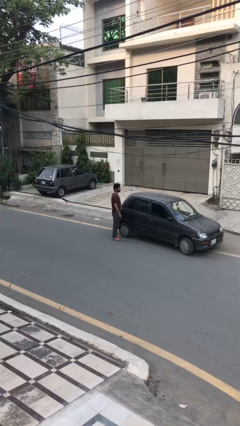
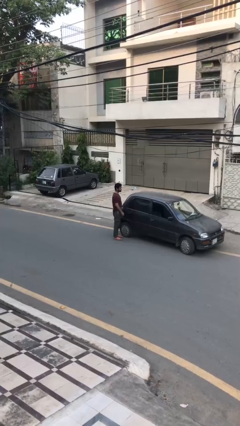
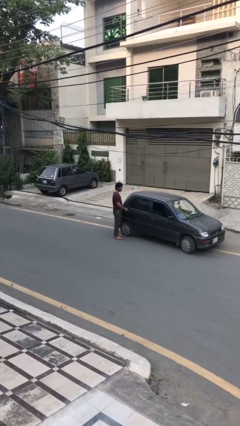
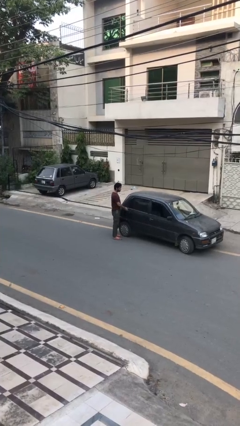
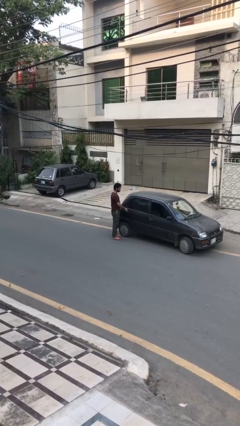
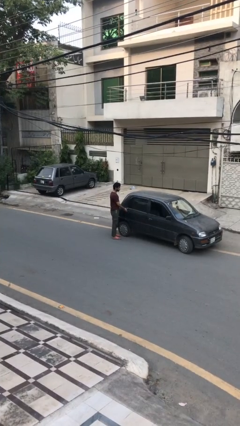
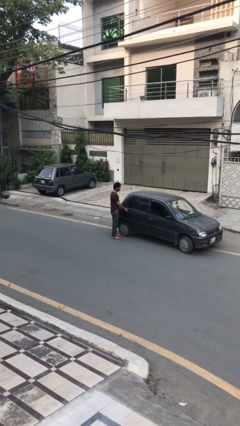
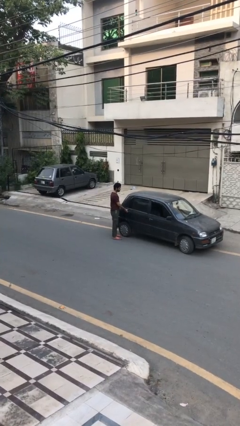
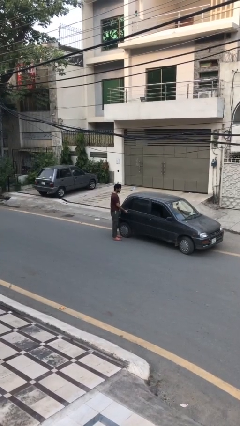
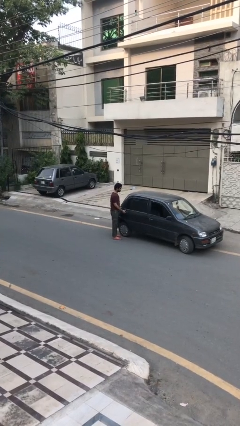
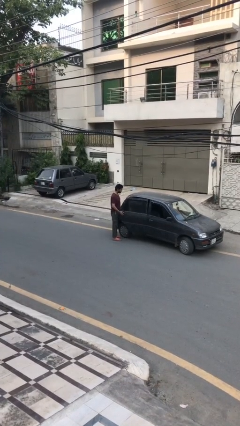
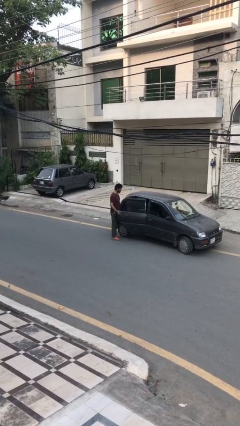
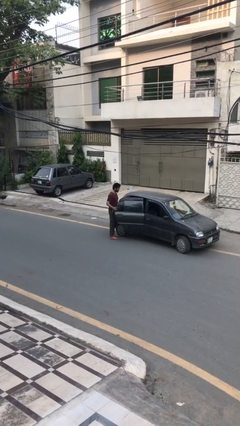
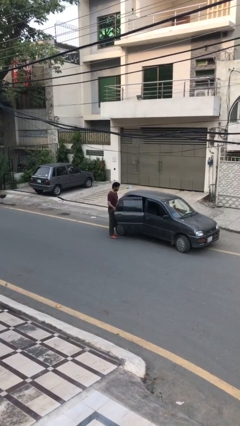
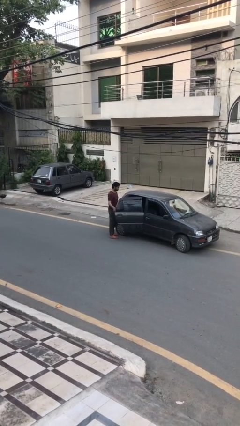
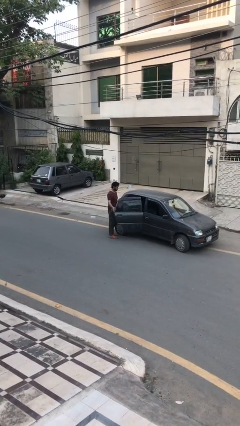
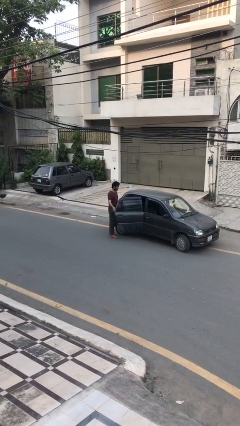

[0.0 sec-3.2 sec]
person opens car door

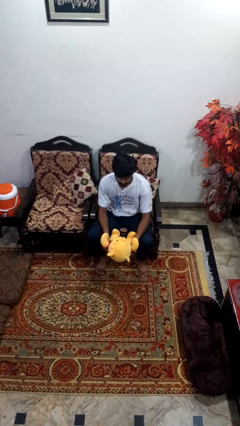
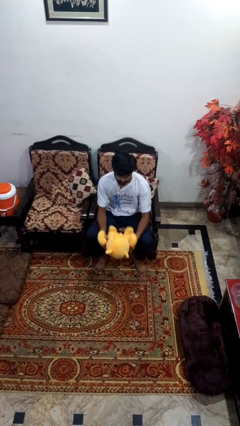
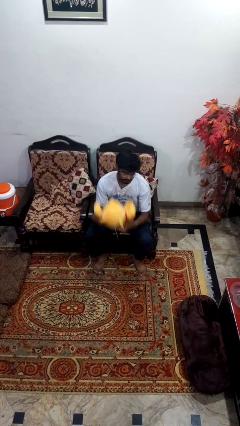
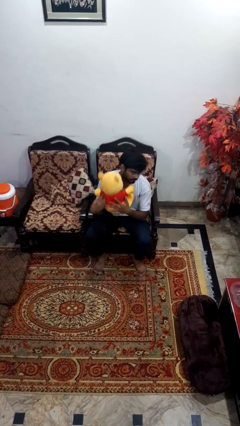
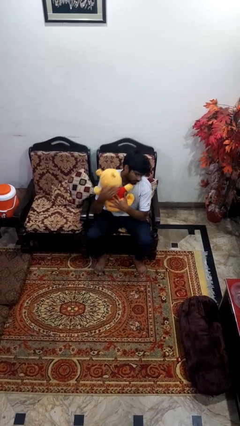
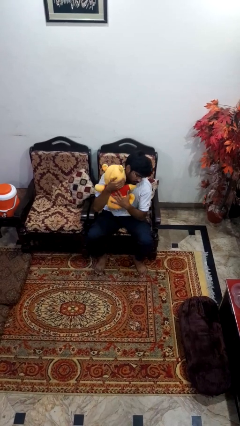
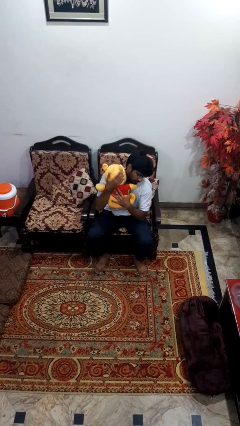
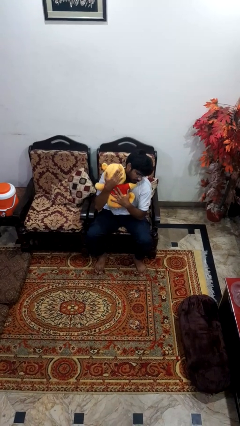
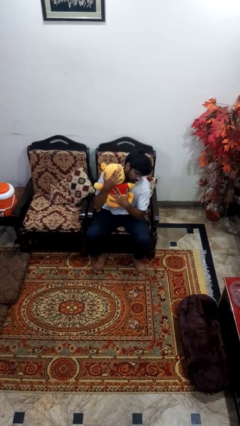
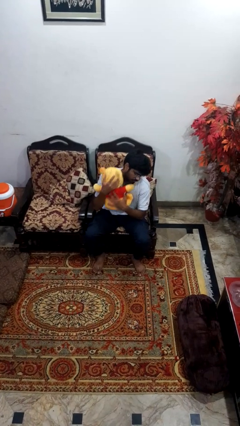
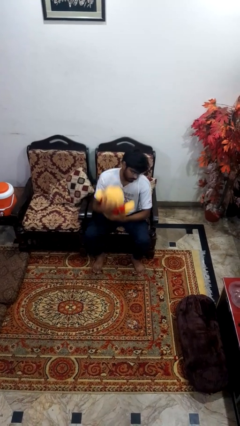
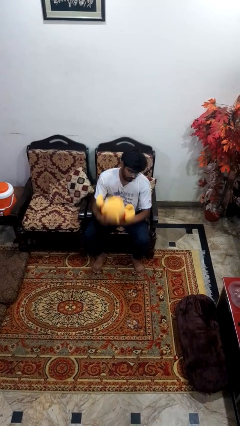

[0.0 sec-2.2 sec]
person hugs stuffed animal

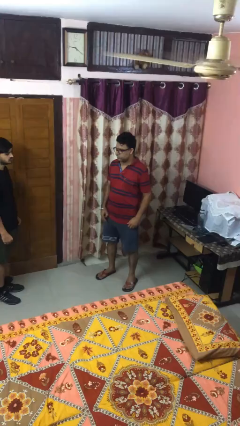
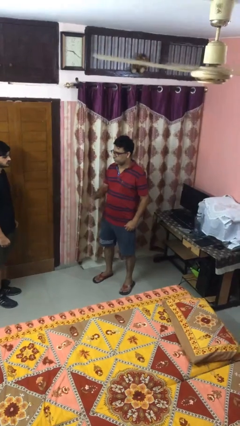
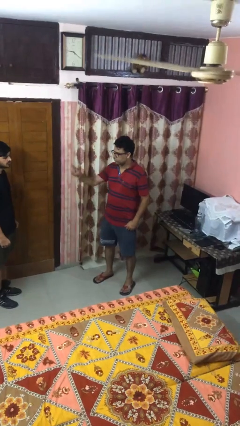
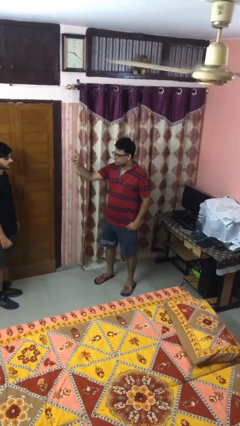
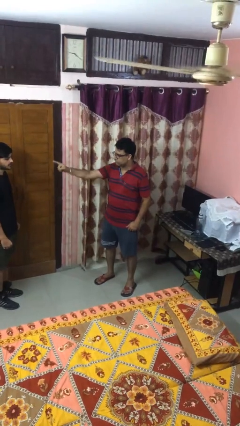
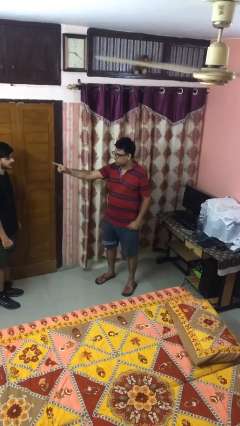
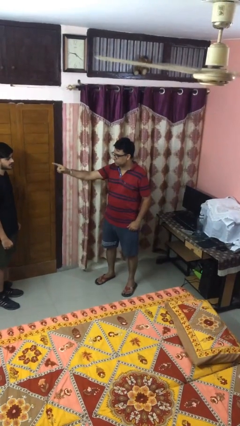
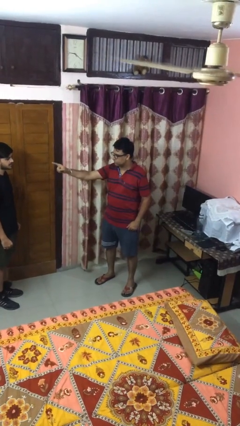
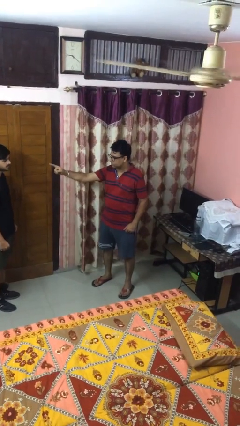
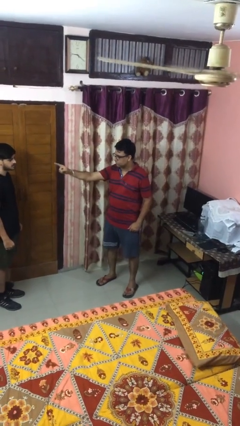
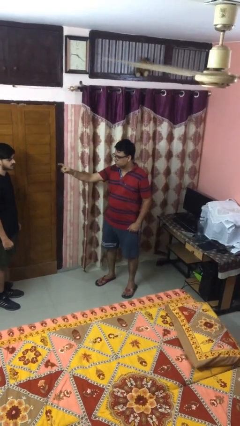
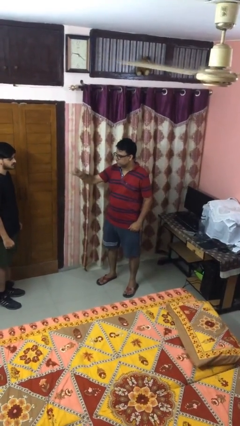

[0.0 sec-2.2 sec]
person points at person

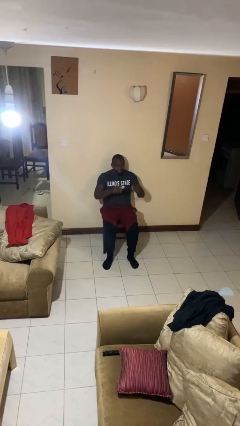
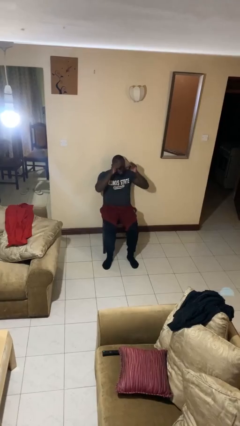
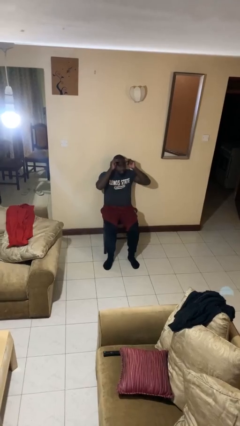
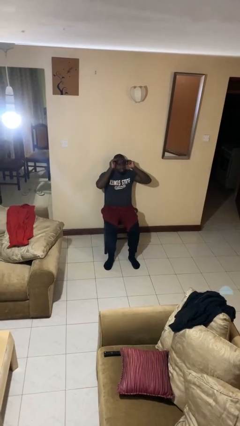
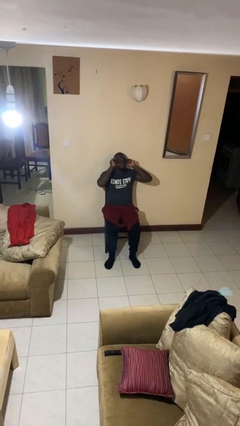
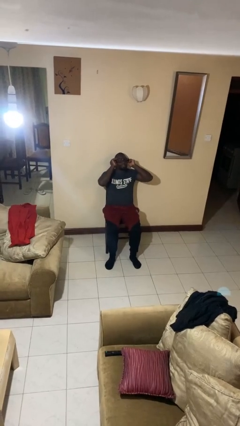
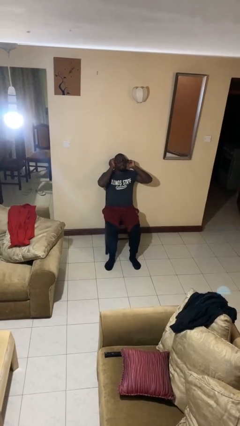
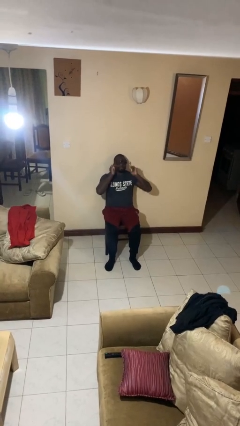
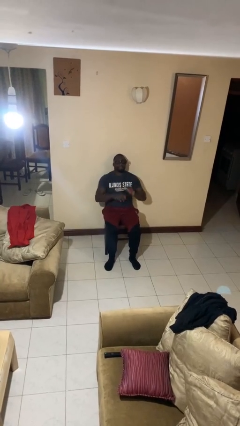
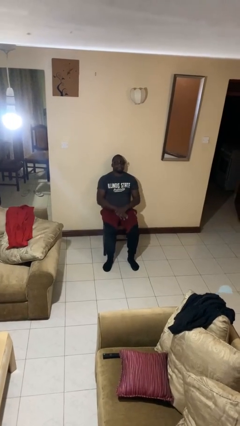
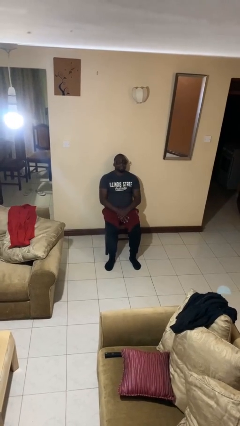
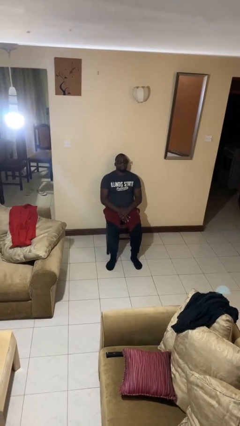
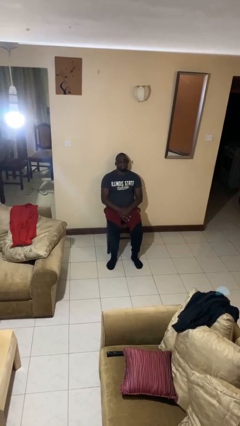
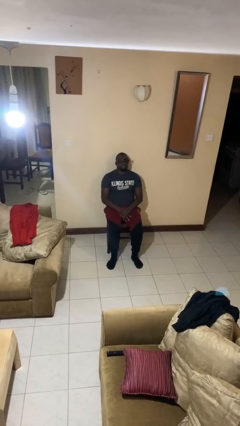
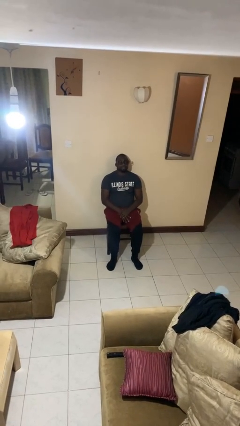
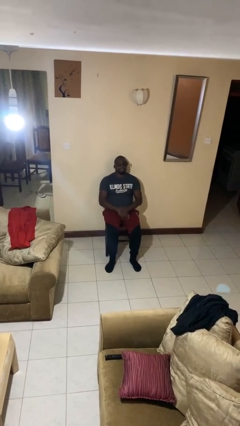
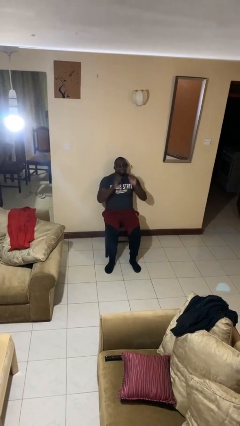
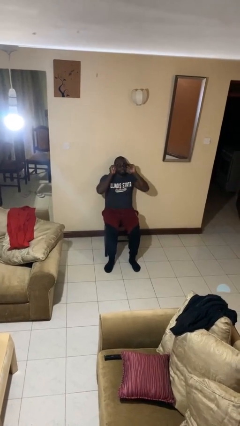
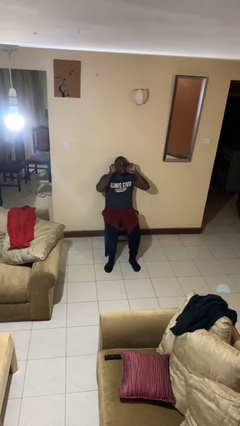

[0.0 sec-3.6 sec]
person puts on glasses

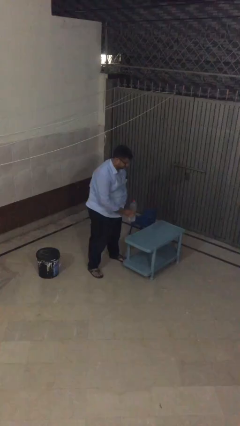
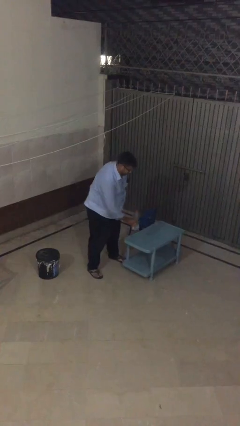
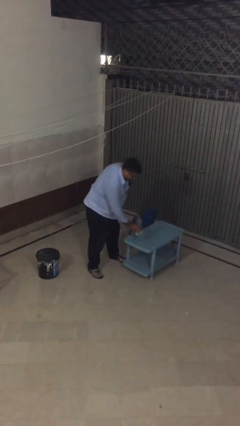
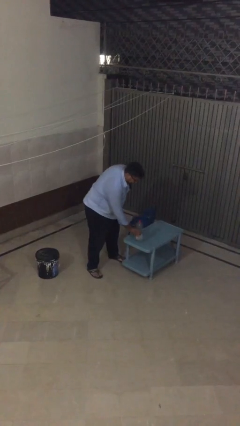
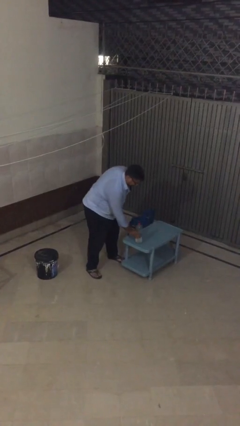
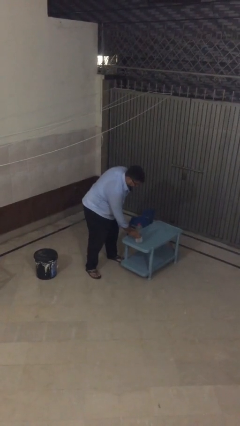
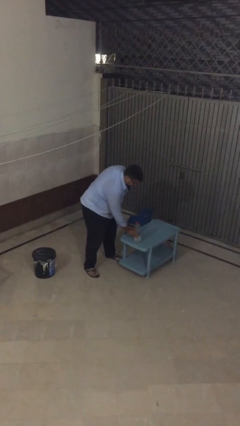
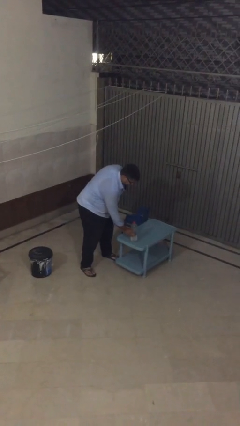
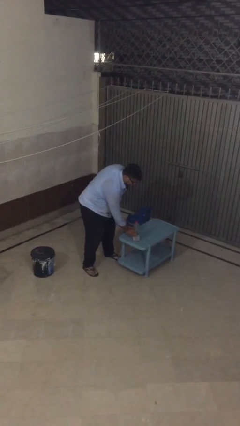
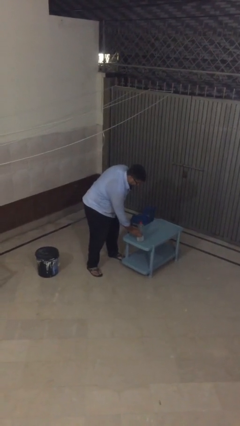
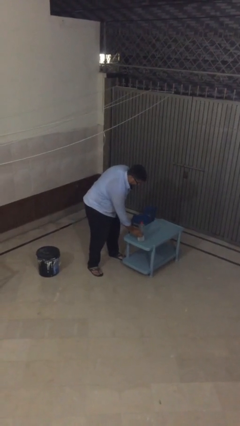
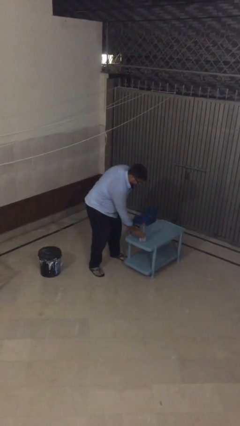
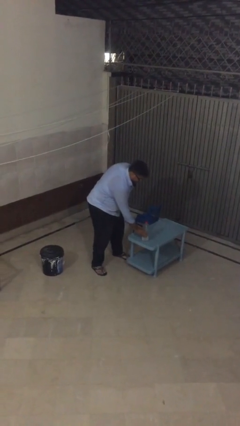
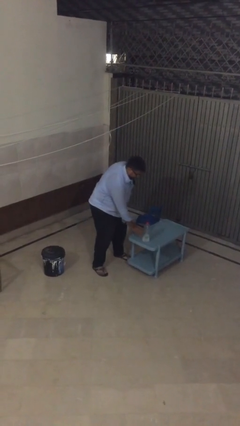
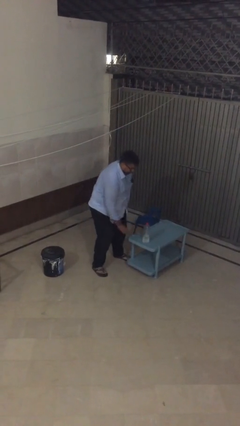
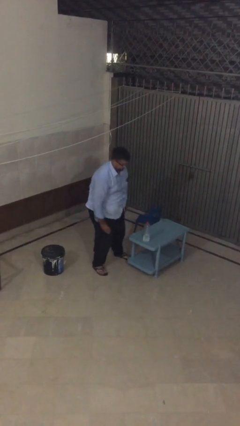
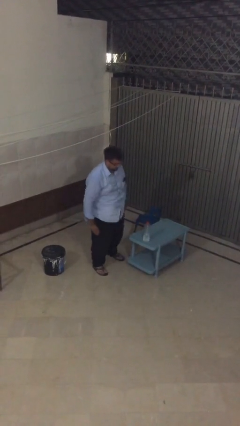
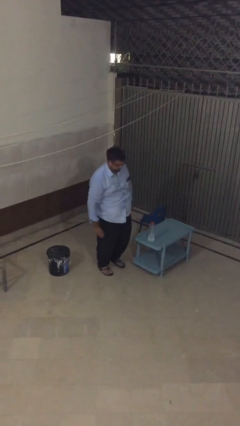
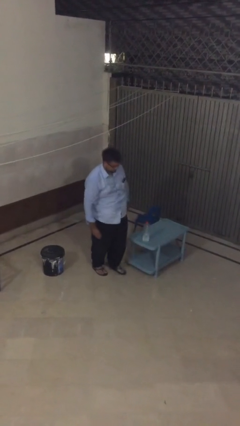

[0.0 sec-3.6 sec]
person puts down object on table

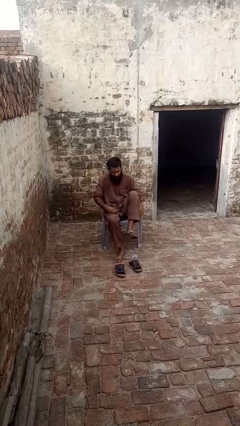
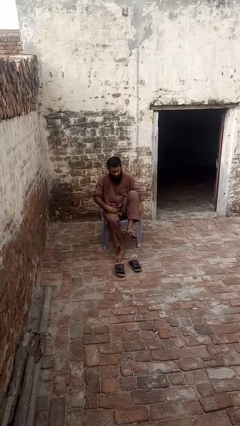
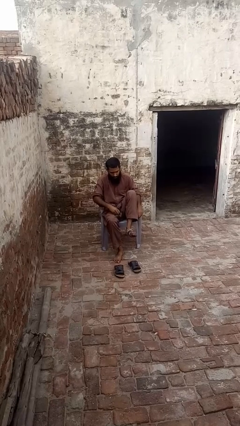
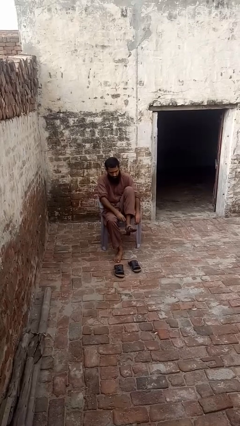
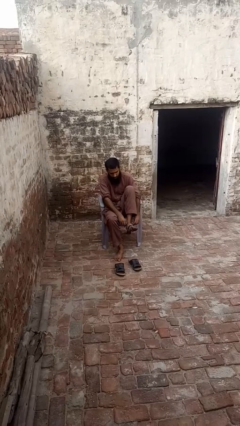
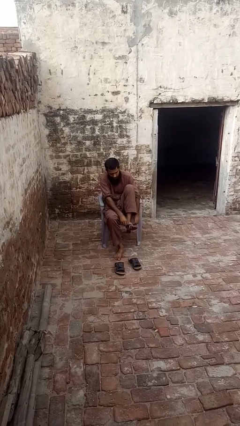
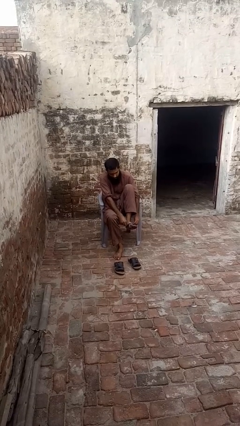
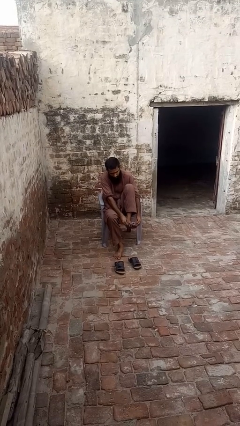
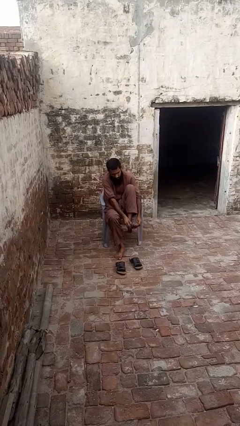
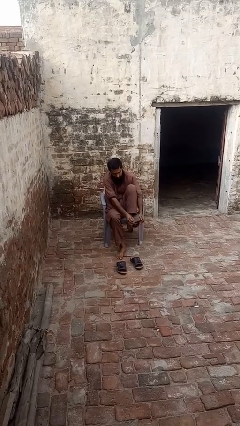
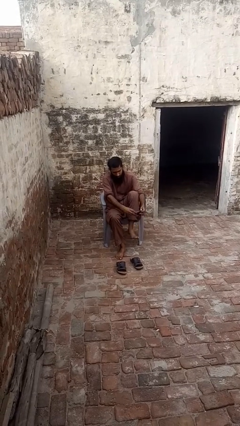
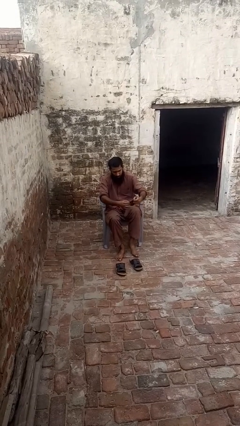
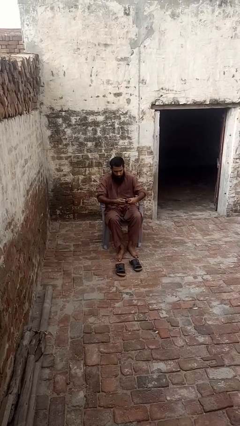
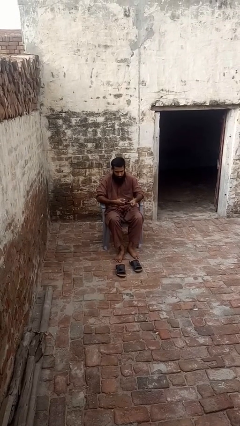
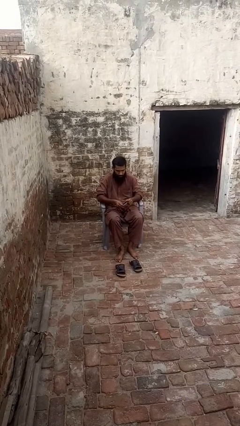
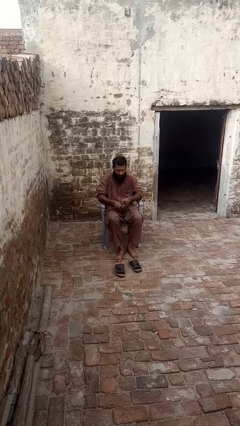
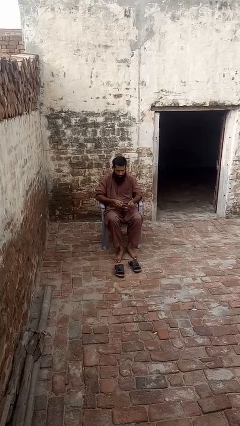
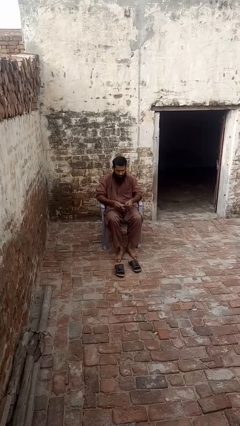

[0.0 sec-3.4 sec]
person takes off socks
